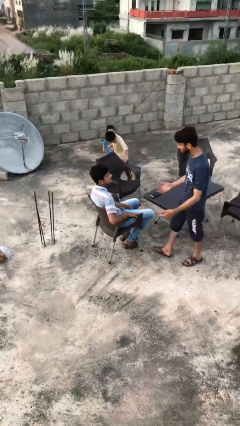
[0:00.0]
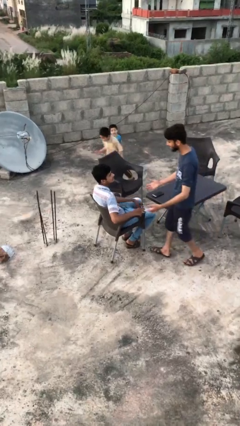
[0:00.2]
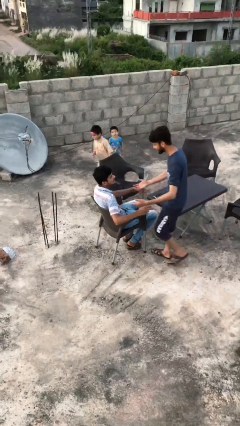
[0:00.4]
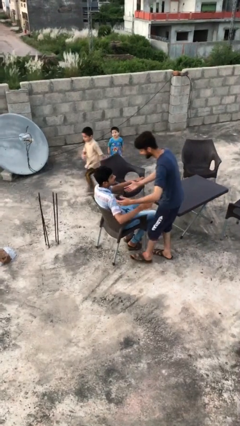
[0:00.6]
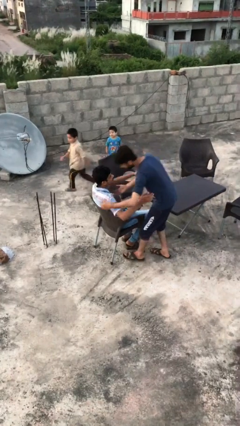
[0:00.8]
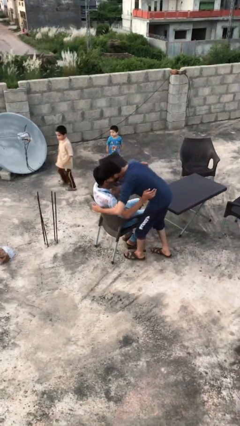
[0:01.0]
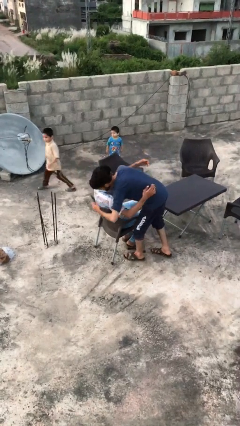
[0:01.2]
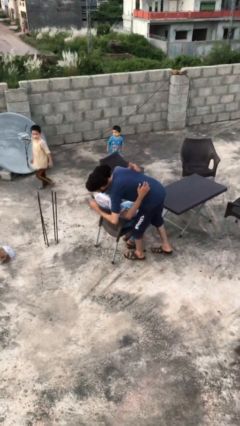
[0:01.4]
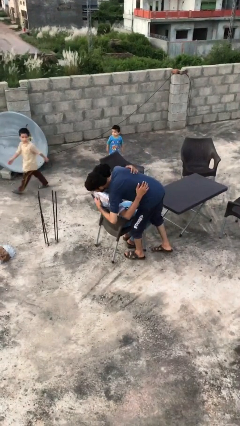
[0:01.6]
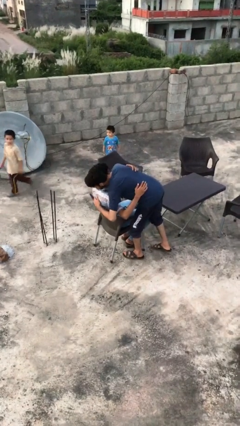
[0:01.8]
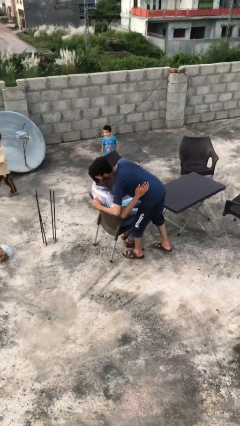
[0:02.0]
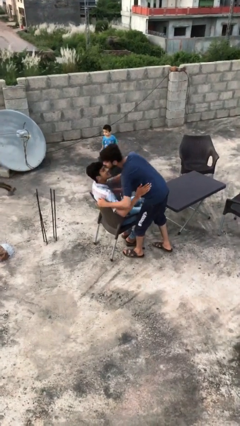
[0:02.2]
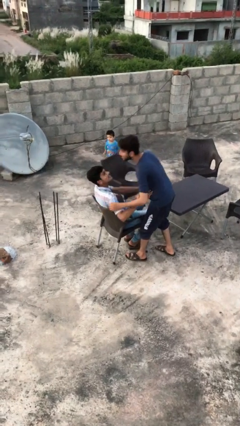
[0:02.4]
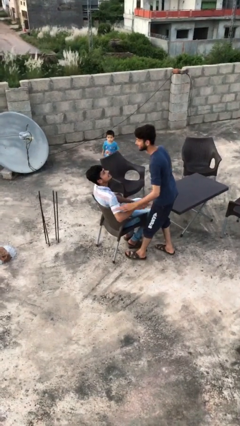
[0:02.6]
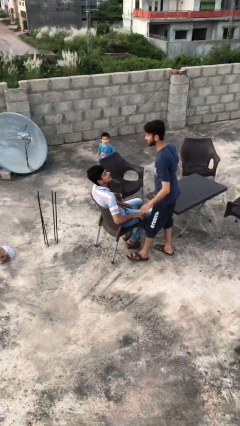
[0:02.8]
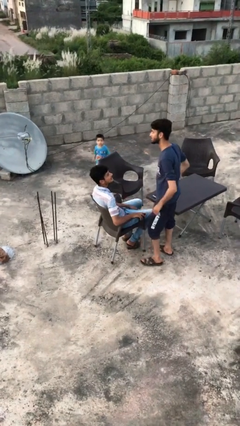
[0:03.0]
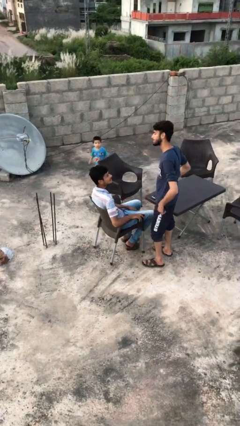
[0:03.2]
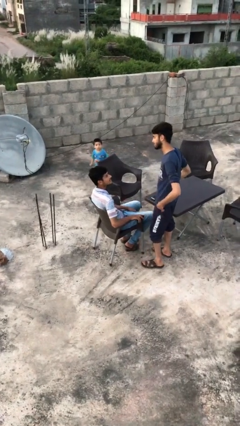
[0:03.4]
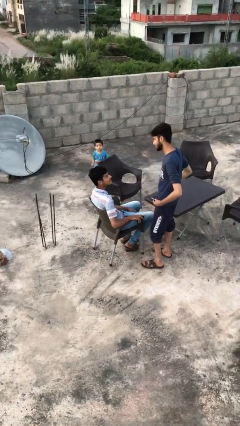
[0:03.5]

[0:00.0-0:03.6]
person embraces person

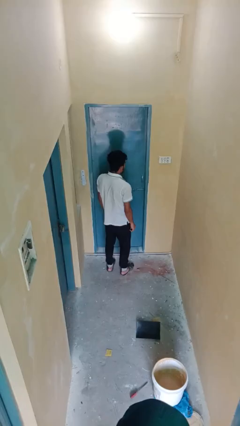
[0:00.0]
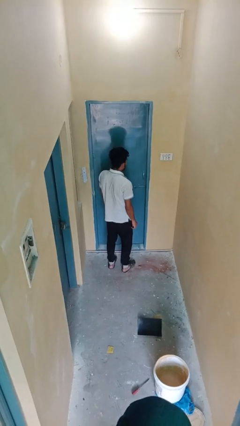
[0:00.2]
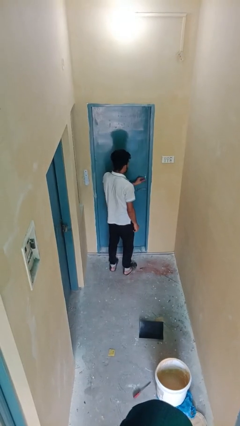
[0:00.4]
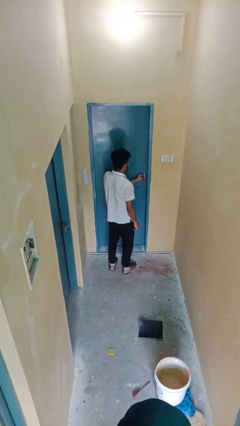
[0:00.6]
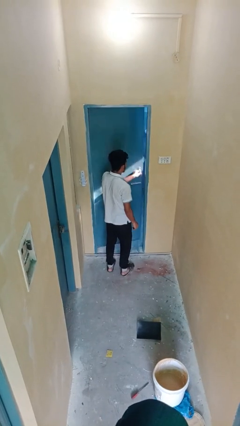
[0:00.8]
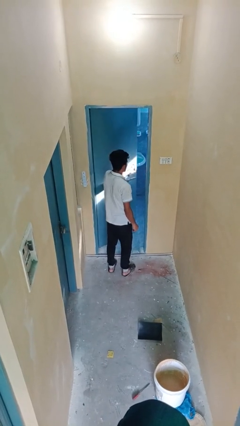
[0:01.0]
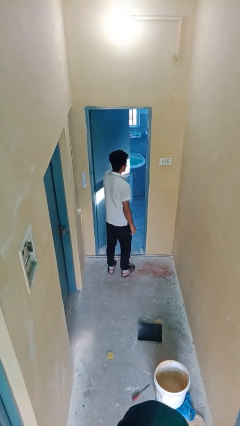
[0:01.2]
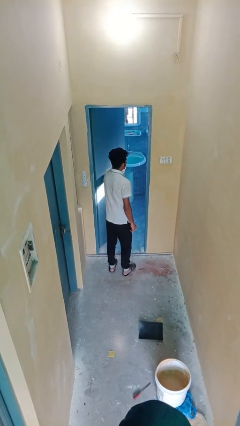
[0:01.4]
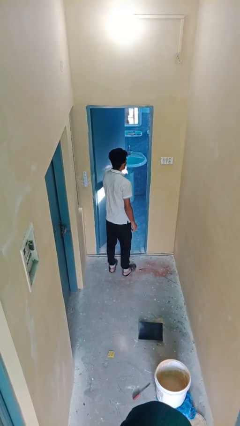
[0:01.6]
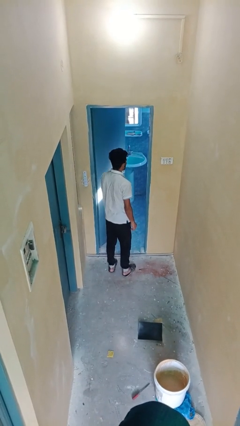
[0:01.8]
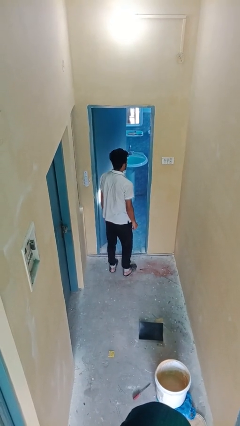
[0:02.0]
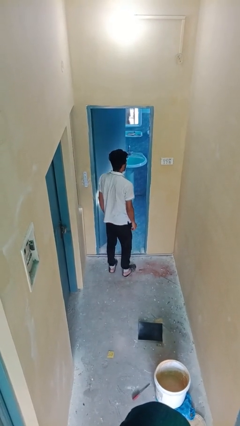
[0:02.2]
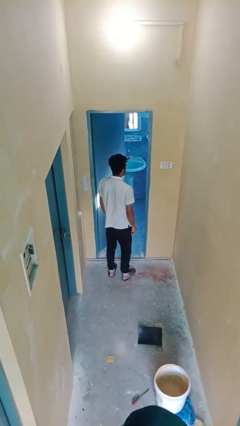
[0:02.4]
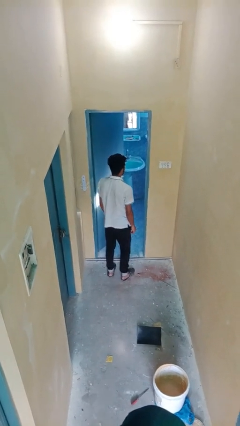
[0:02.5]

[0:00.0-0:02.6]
person opens facility door

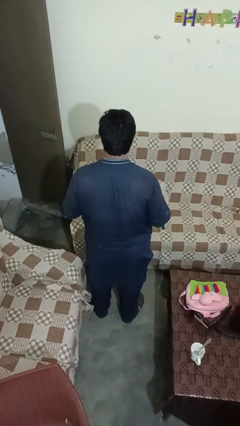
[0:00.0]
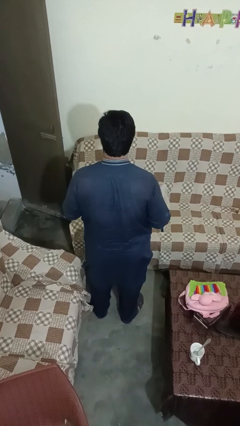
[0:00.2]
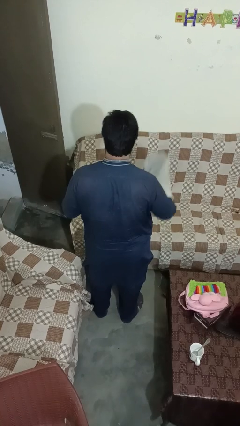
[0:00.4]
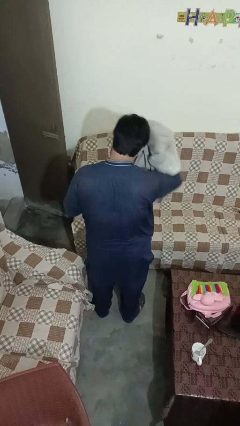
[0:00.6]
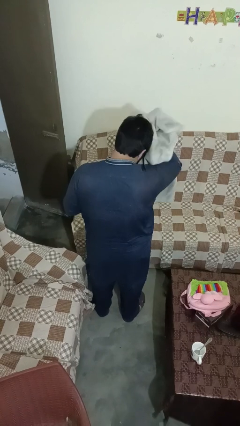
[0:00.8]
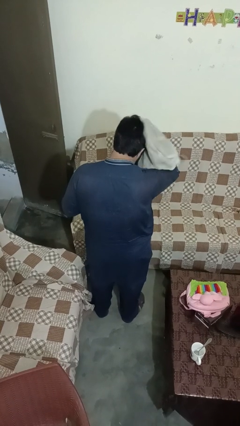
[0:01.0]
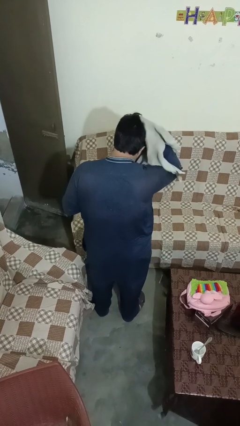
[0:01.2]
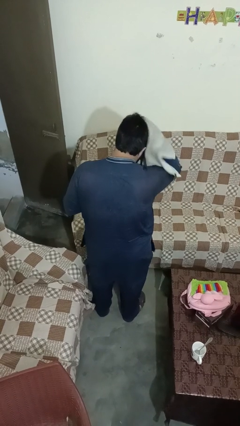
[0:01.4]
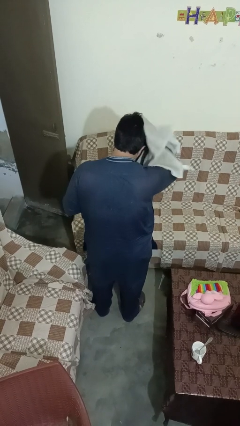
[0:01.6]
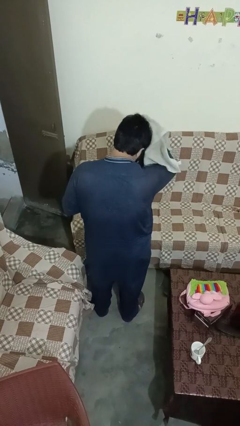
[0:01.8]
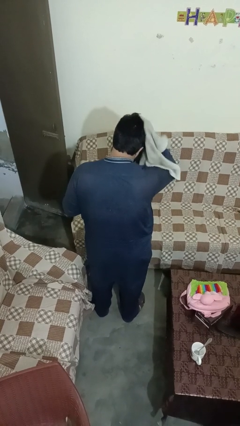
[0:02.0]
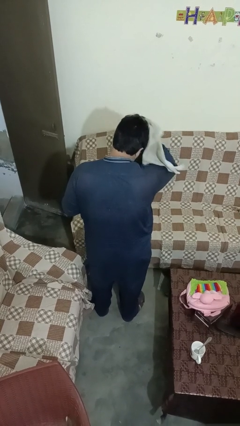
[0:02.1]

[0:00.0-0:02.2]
person dries hair with towel

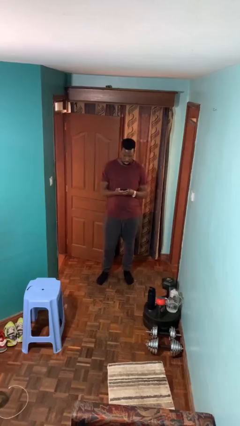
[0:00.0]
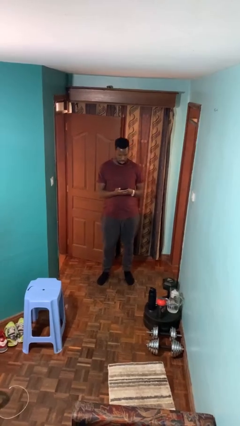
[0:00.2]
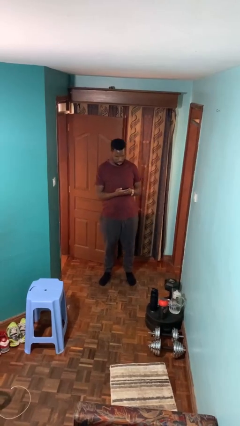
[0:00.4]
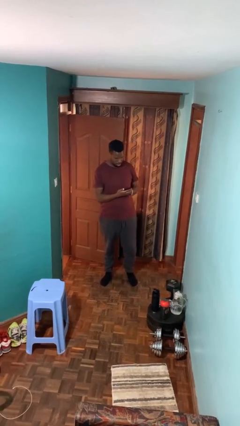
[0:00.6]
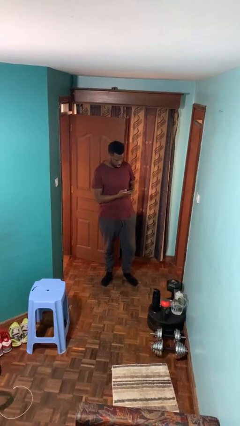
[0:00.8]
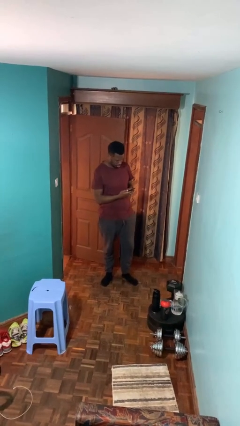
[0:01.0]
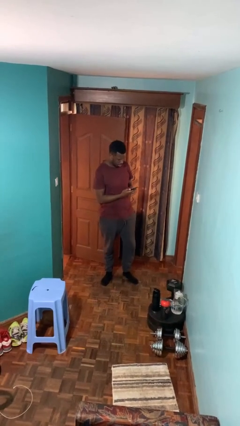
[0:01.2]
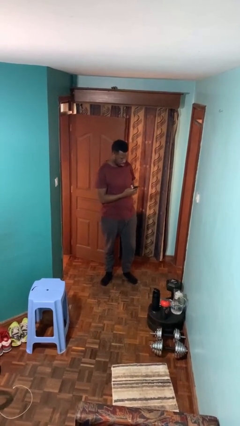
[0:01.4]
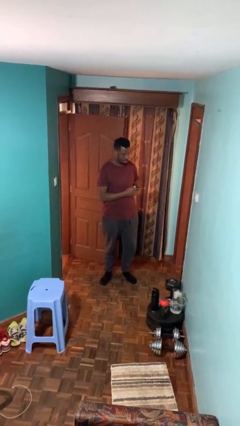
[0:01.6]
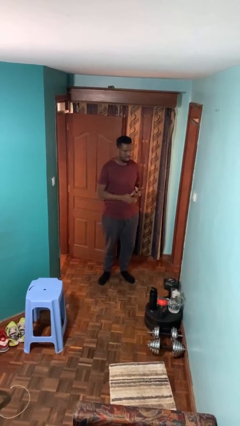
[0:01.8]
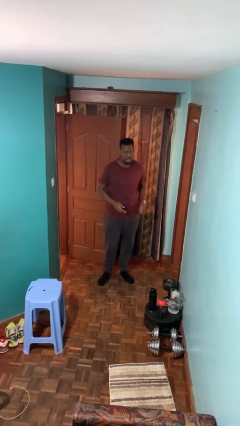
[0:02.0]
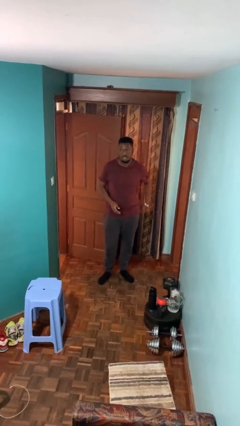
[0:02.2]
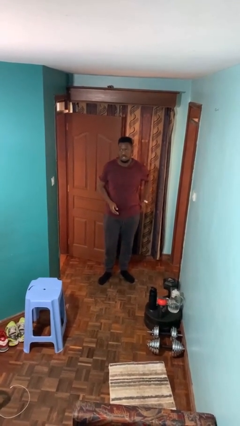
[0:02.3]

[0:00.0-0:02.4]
person puts phone into pocket

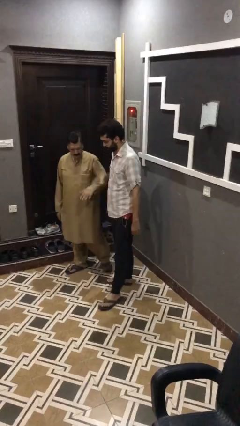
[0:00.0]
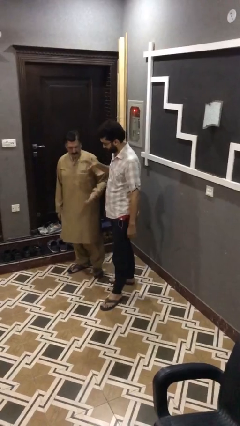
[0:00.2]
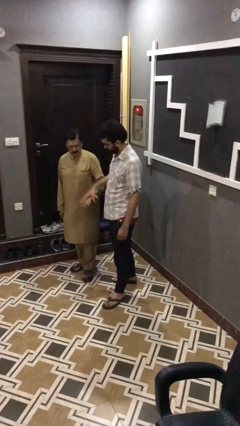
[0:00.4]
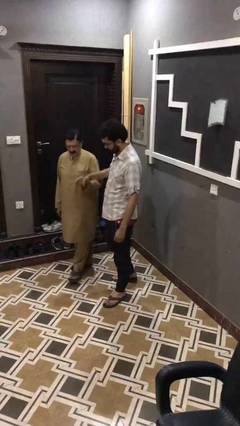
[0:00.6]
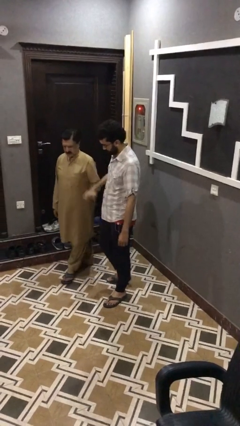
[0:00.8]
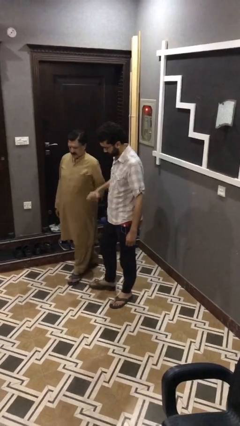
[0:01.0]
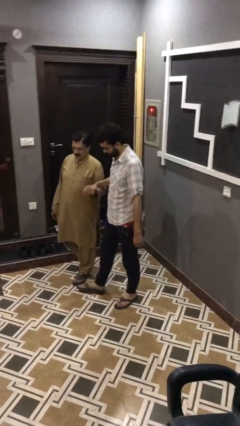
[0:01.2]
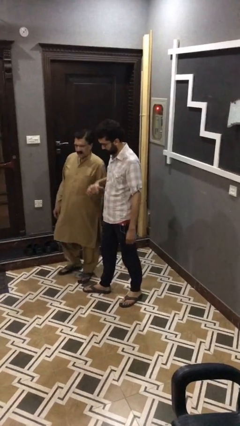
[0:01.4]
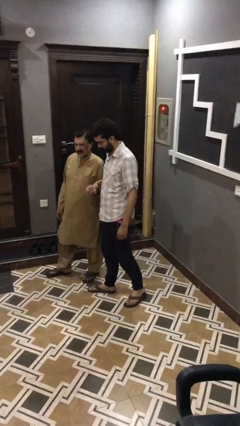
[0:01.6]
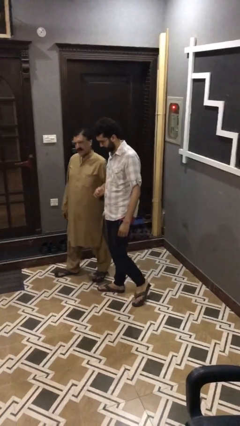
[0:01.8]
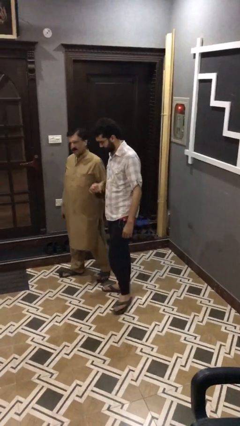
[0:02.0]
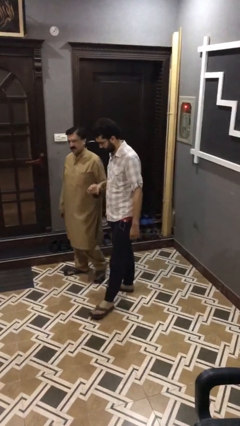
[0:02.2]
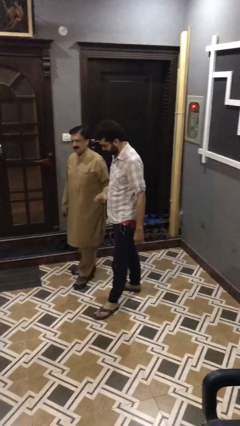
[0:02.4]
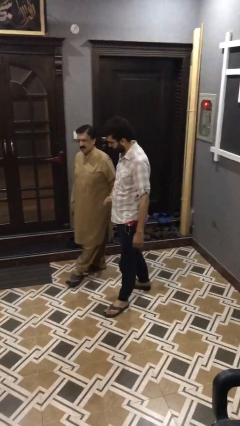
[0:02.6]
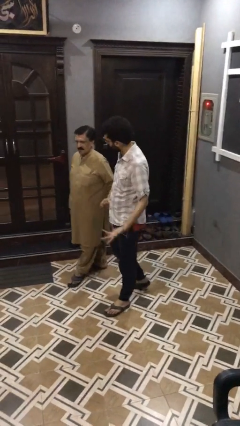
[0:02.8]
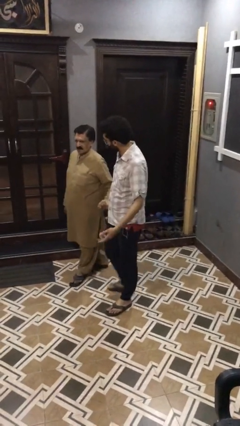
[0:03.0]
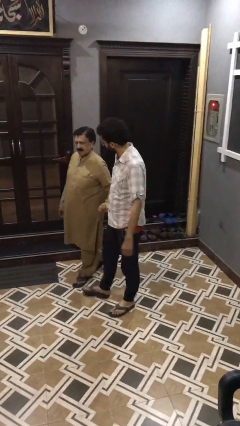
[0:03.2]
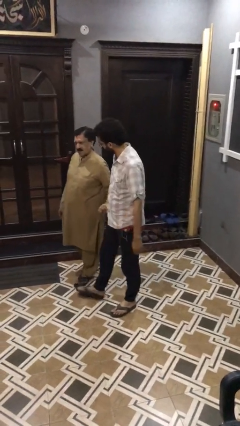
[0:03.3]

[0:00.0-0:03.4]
person holds hand

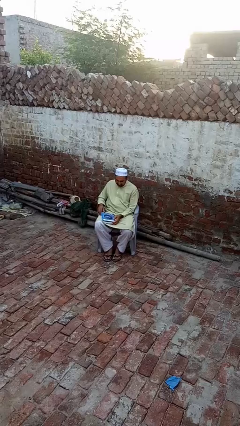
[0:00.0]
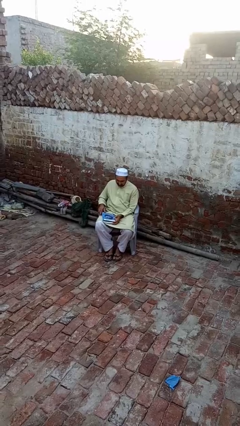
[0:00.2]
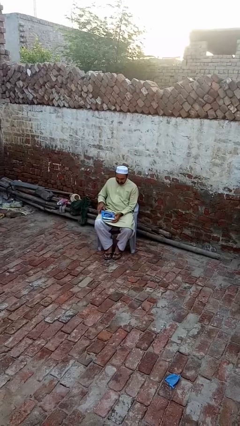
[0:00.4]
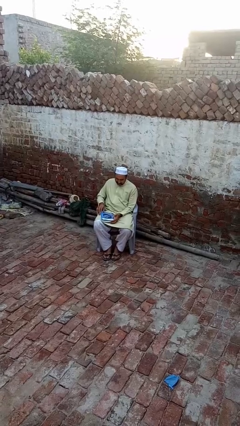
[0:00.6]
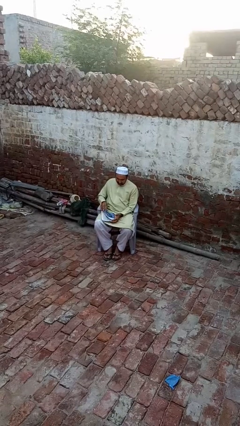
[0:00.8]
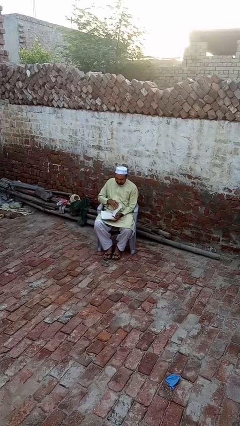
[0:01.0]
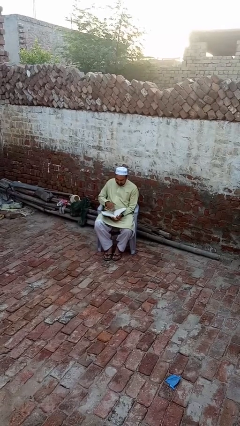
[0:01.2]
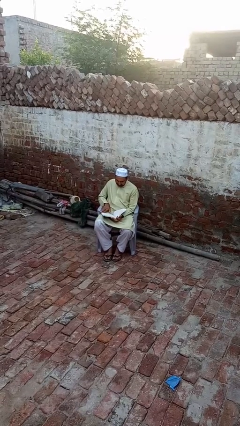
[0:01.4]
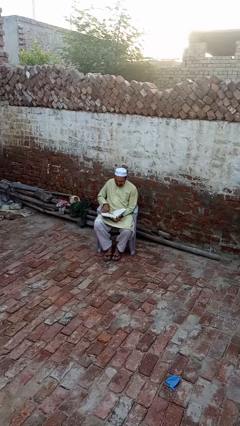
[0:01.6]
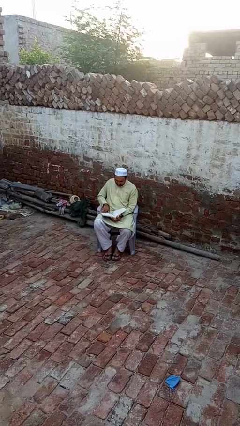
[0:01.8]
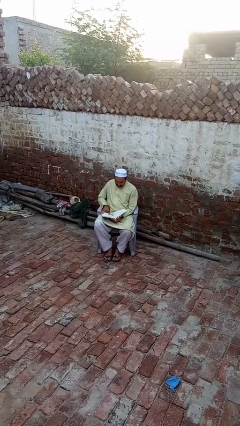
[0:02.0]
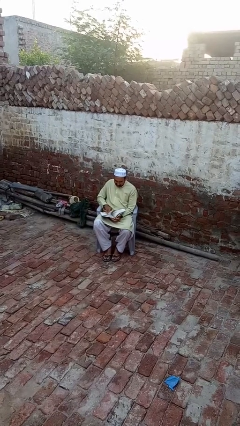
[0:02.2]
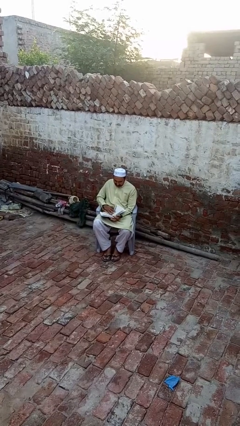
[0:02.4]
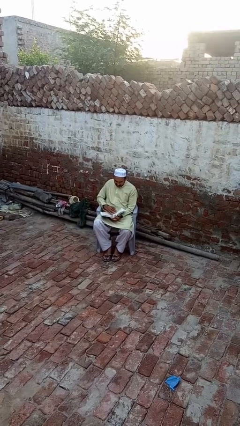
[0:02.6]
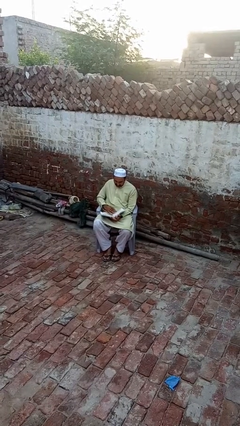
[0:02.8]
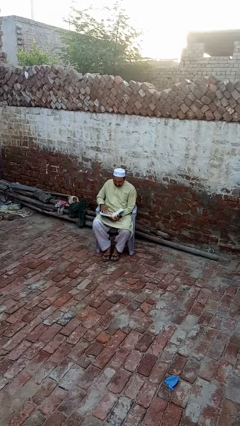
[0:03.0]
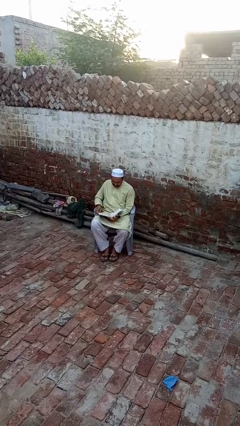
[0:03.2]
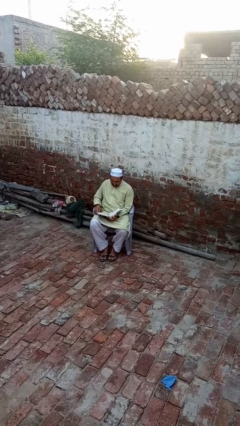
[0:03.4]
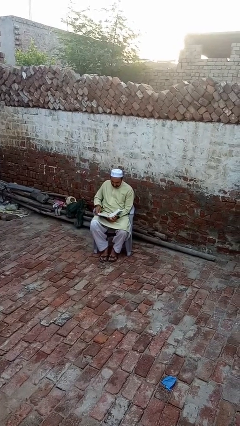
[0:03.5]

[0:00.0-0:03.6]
person reads book
